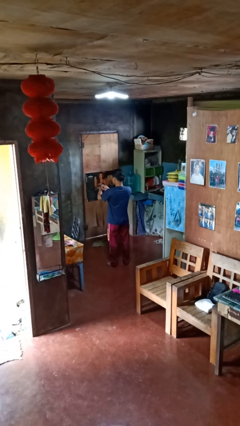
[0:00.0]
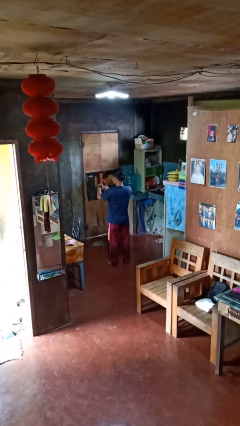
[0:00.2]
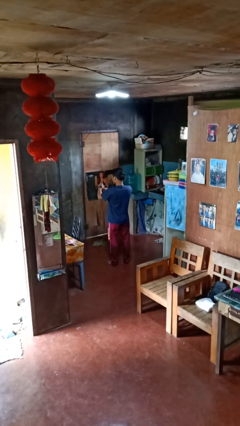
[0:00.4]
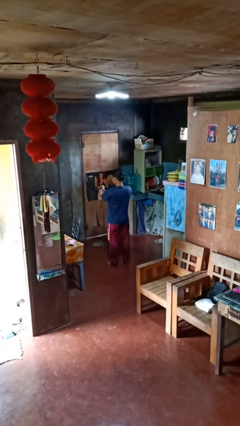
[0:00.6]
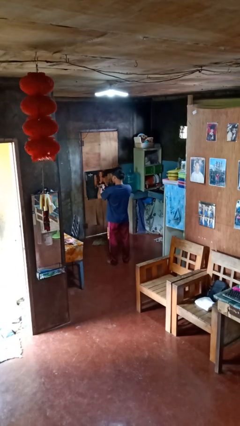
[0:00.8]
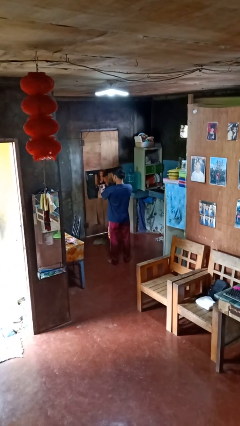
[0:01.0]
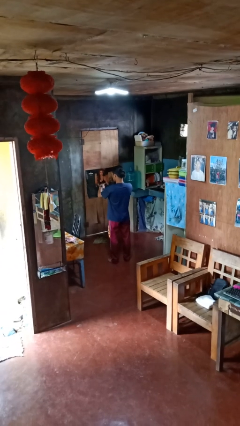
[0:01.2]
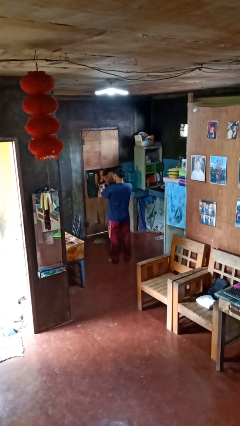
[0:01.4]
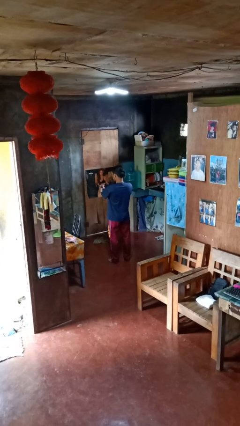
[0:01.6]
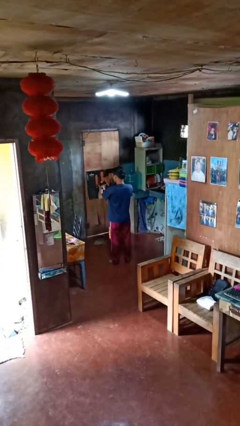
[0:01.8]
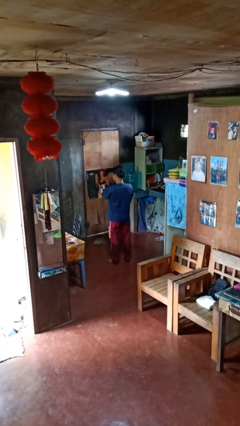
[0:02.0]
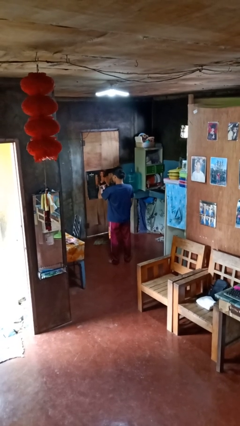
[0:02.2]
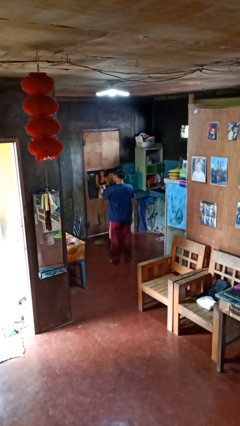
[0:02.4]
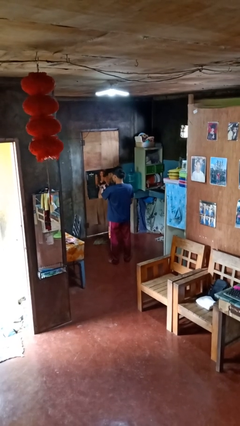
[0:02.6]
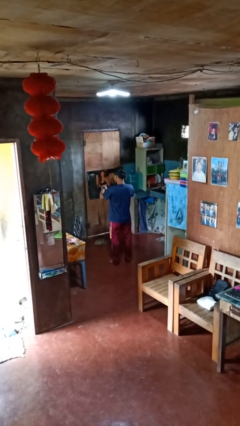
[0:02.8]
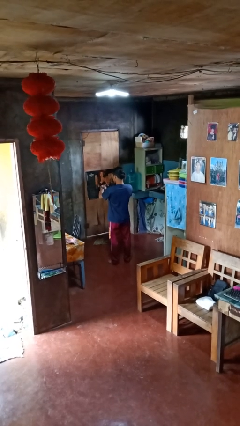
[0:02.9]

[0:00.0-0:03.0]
person puts on wristwatch

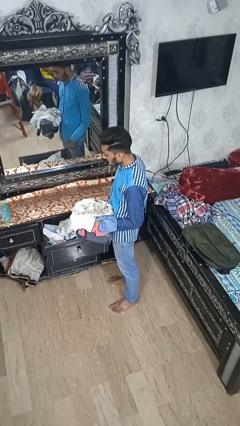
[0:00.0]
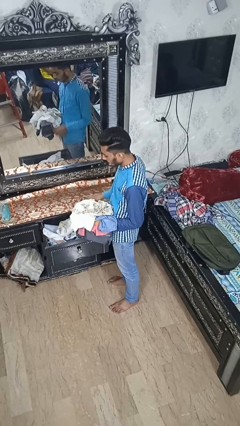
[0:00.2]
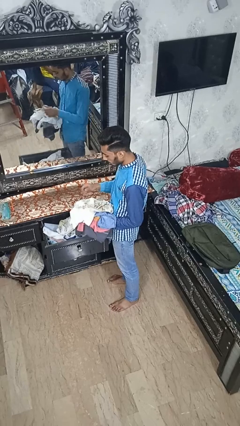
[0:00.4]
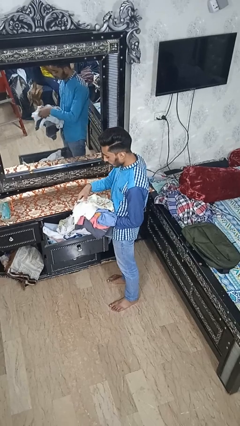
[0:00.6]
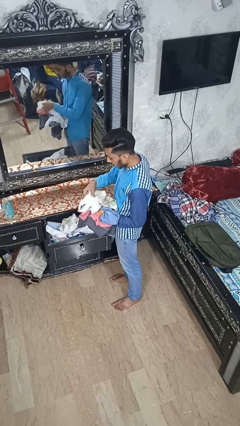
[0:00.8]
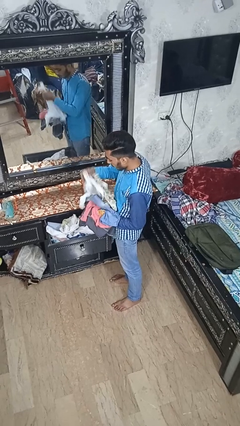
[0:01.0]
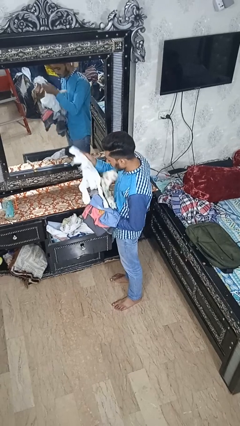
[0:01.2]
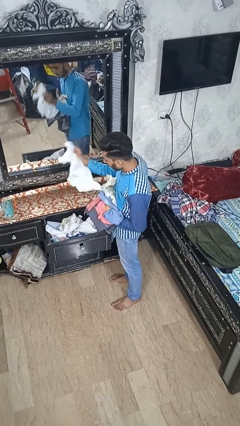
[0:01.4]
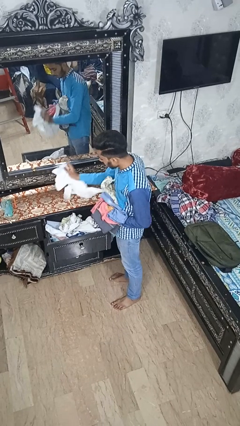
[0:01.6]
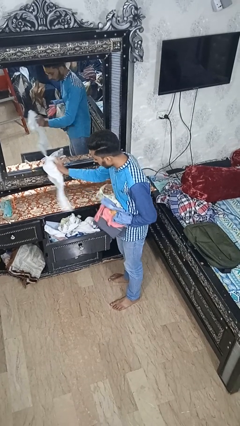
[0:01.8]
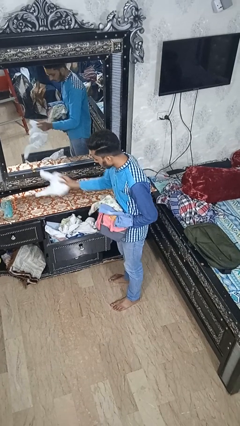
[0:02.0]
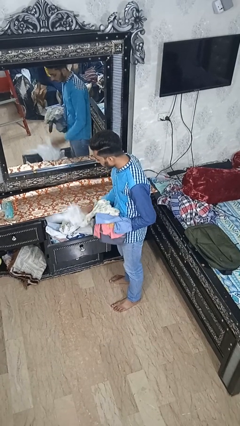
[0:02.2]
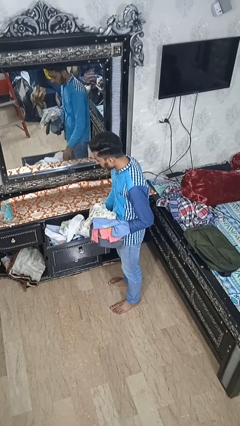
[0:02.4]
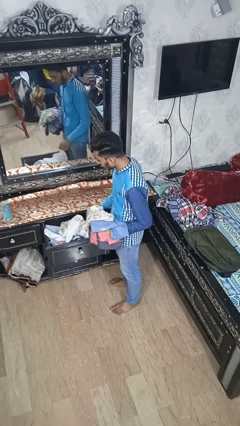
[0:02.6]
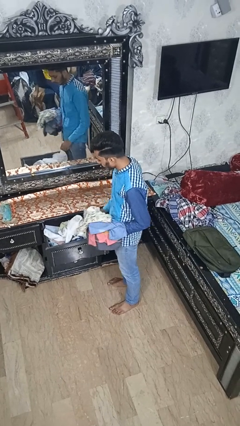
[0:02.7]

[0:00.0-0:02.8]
person puts clothes into dresser

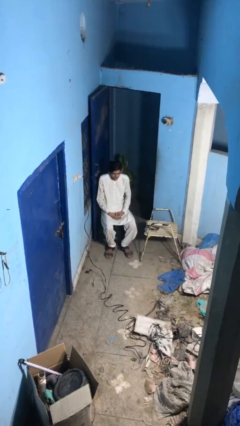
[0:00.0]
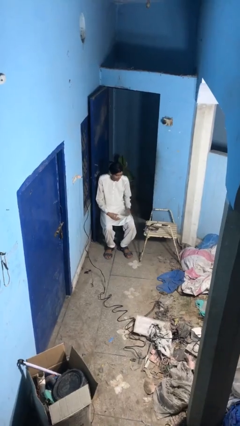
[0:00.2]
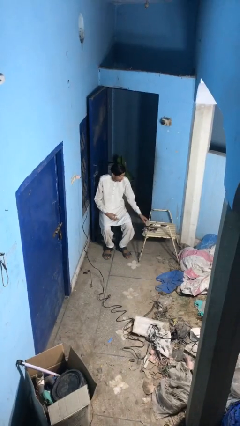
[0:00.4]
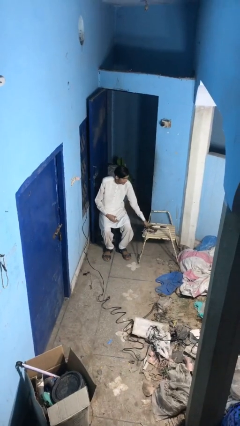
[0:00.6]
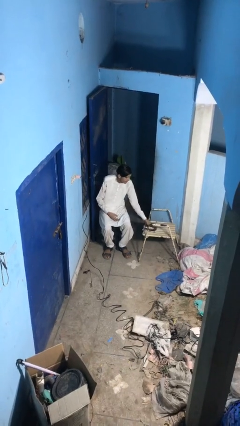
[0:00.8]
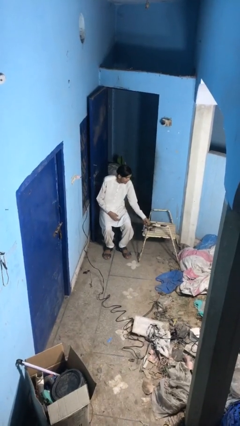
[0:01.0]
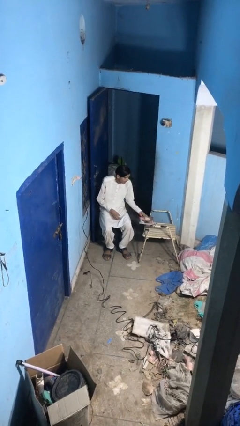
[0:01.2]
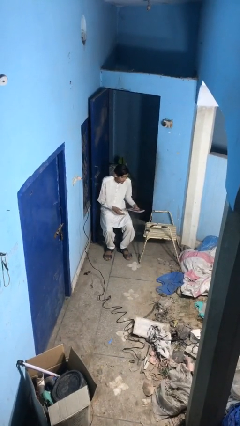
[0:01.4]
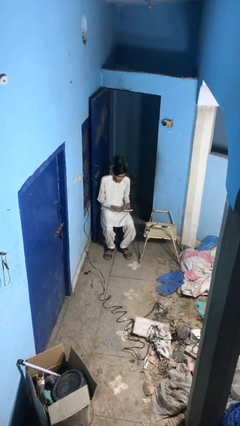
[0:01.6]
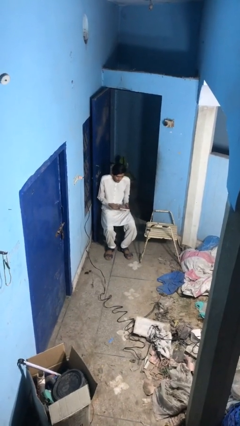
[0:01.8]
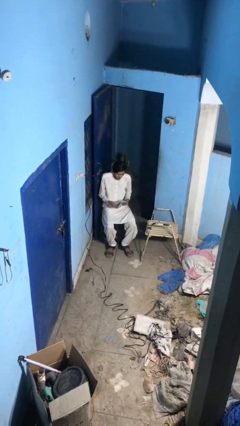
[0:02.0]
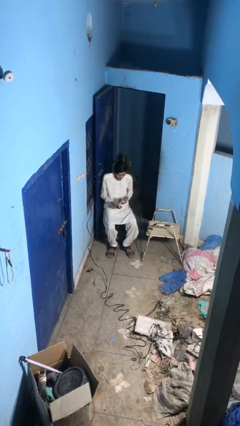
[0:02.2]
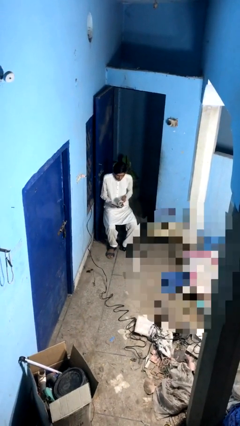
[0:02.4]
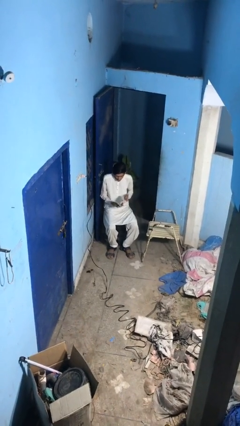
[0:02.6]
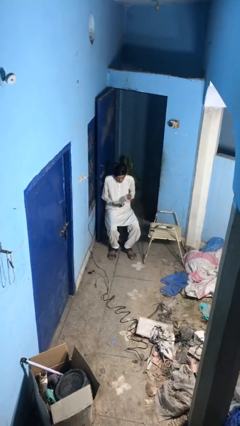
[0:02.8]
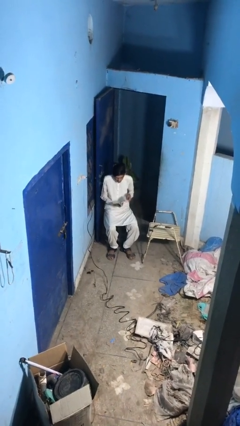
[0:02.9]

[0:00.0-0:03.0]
person picks up object from table

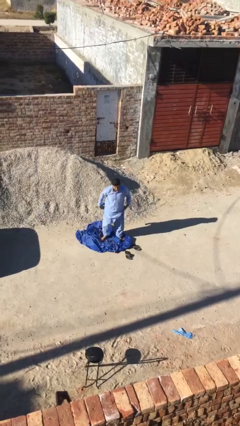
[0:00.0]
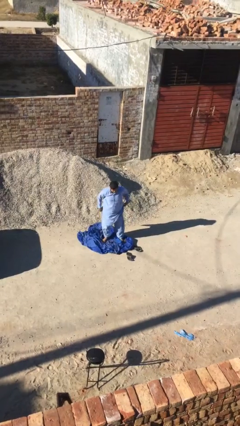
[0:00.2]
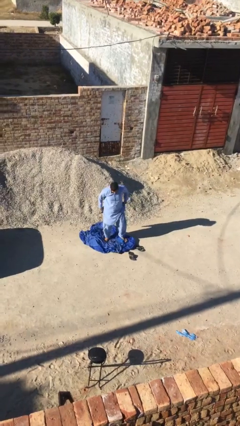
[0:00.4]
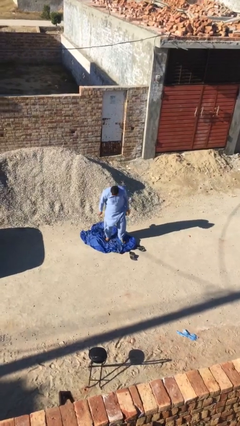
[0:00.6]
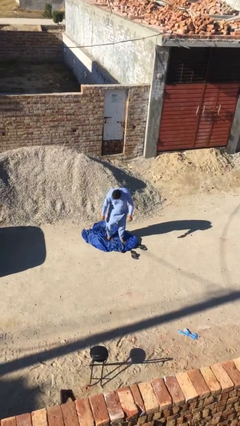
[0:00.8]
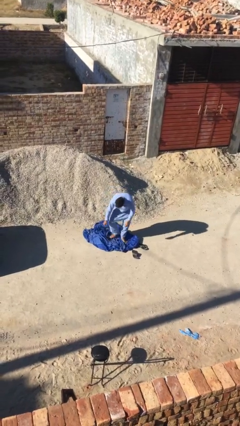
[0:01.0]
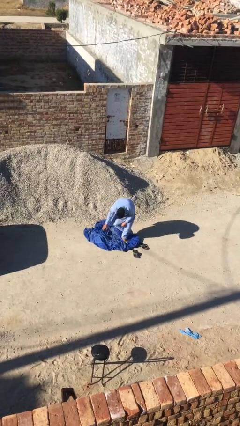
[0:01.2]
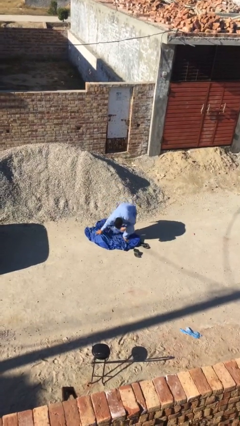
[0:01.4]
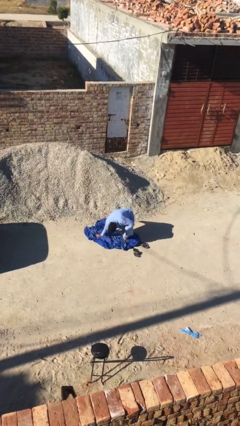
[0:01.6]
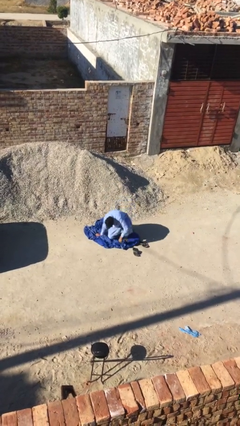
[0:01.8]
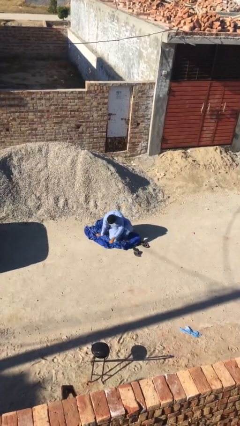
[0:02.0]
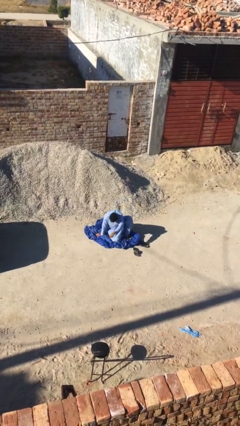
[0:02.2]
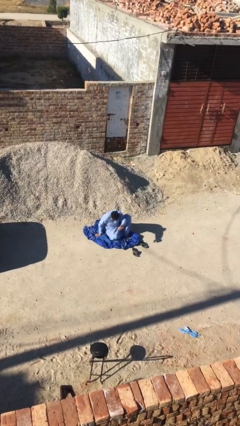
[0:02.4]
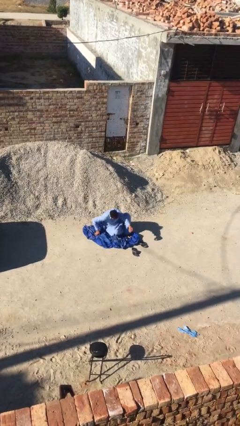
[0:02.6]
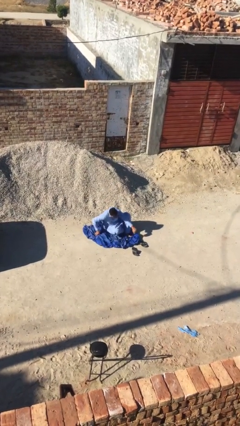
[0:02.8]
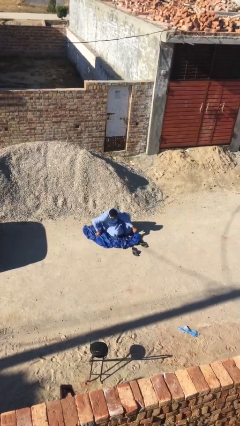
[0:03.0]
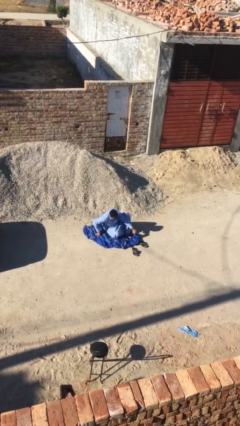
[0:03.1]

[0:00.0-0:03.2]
person sits down

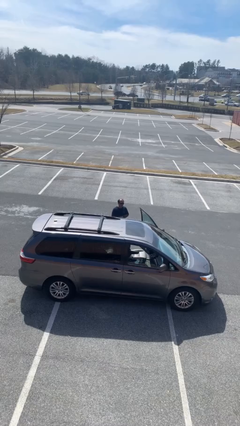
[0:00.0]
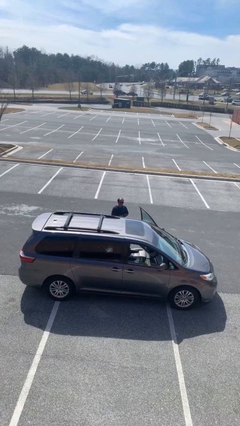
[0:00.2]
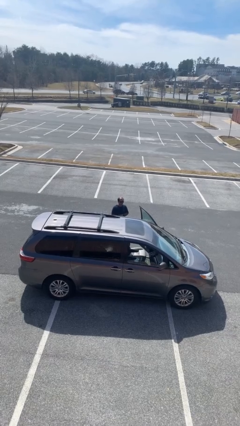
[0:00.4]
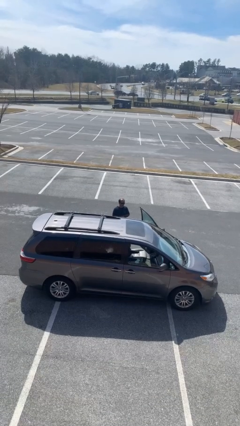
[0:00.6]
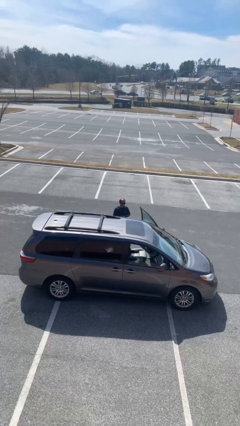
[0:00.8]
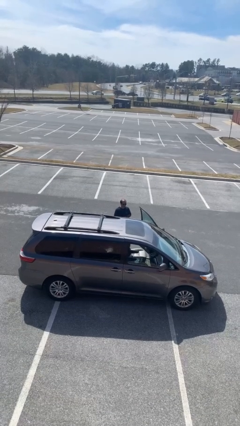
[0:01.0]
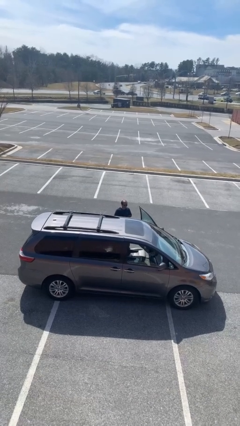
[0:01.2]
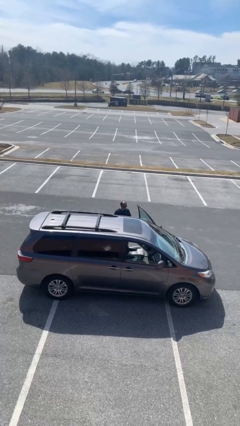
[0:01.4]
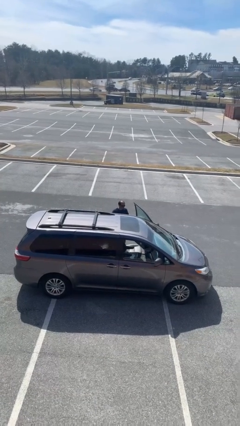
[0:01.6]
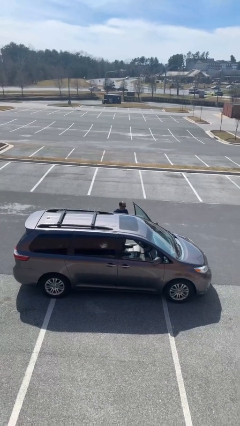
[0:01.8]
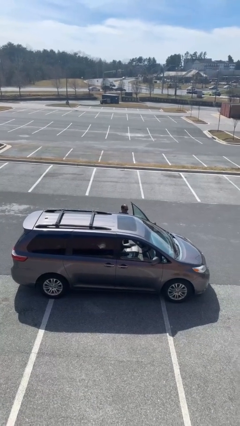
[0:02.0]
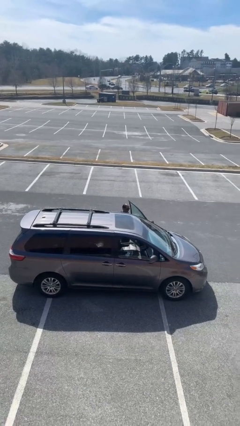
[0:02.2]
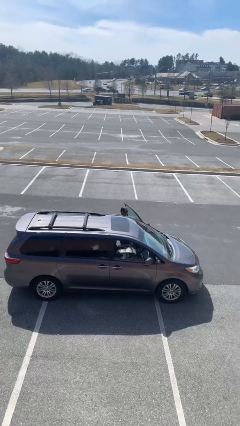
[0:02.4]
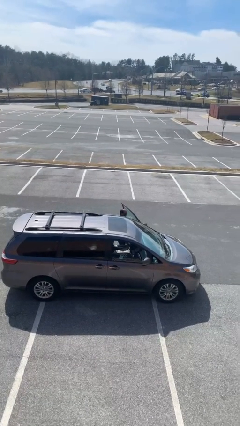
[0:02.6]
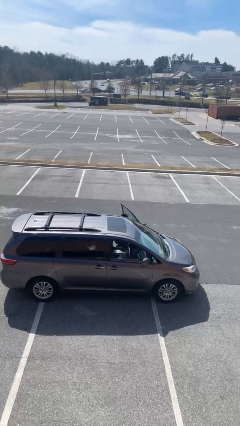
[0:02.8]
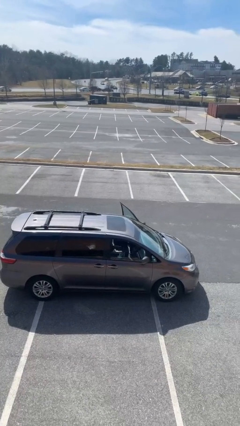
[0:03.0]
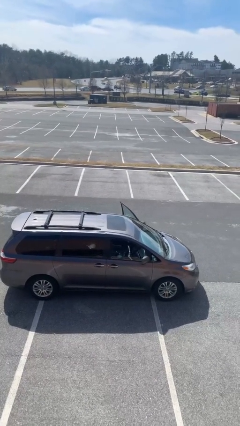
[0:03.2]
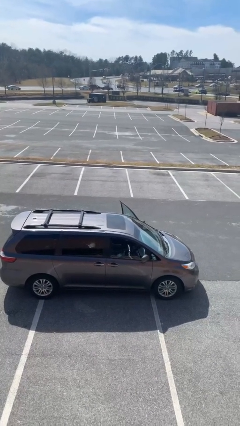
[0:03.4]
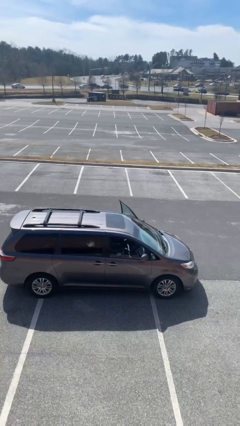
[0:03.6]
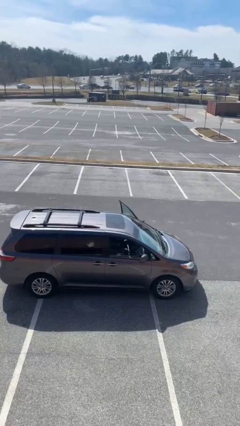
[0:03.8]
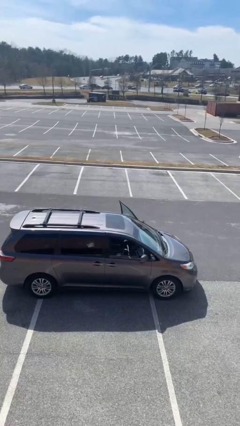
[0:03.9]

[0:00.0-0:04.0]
person enters car

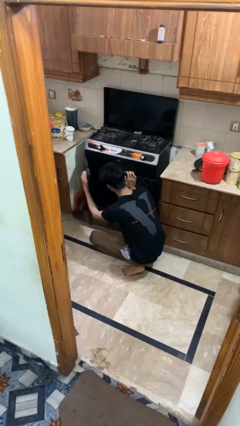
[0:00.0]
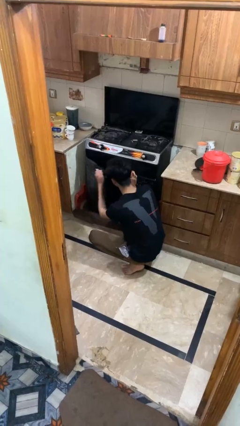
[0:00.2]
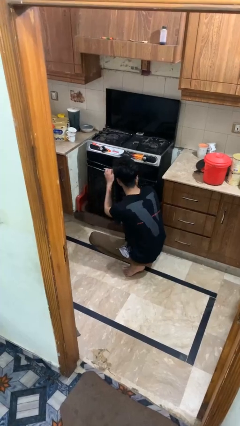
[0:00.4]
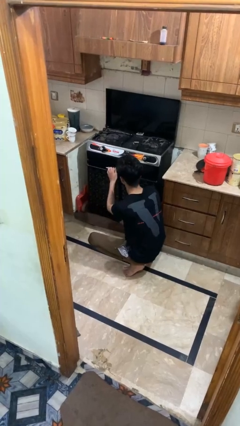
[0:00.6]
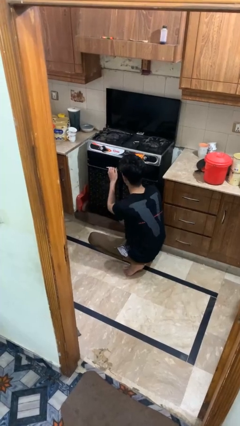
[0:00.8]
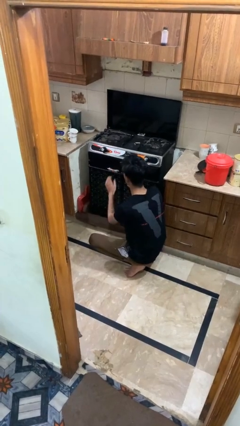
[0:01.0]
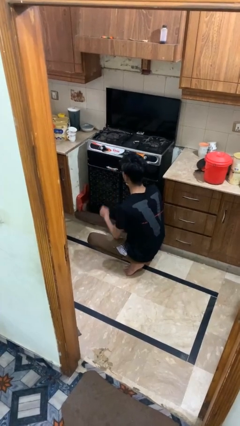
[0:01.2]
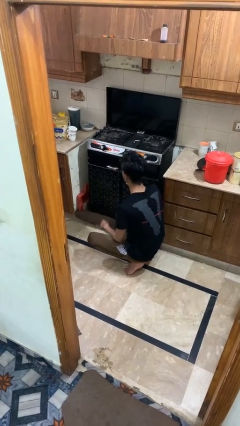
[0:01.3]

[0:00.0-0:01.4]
person closes oven door
